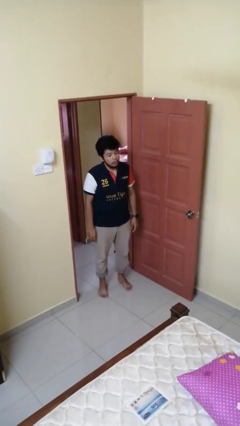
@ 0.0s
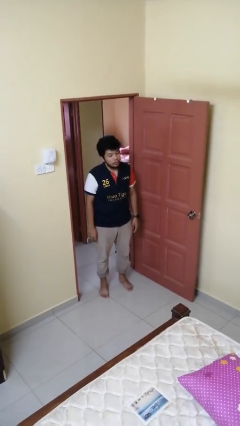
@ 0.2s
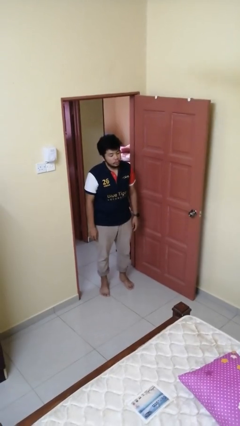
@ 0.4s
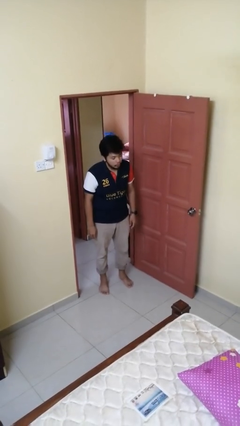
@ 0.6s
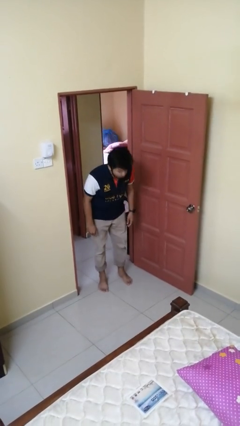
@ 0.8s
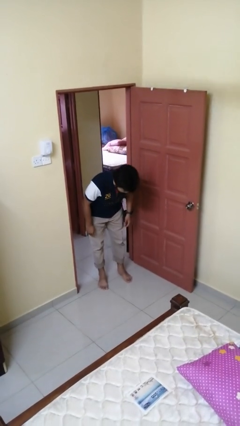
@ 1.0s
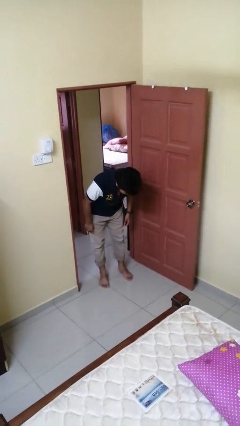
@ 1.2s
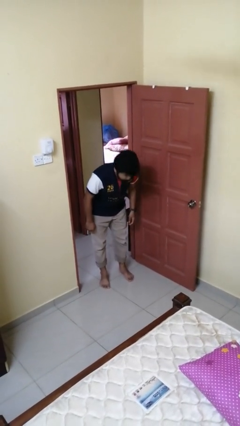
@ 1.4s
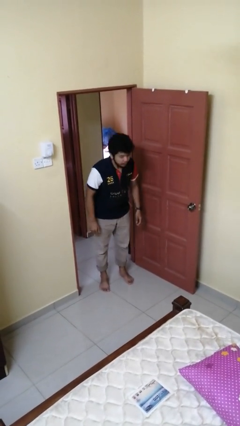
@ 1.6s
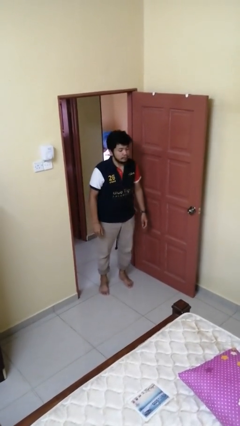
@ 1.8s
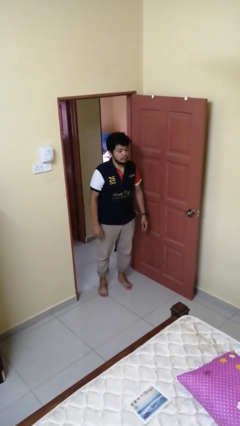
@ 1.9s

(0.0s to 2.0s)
person bows

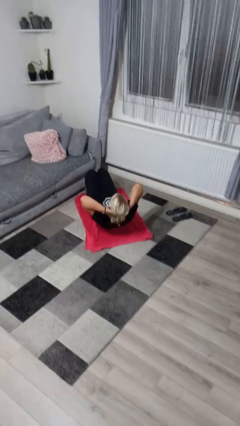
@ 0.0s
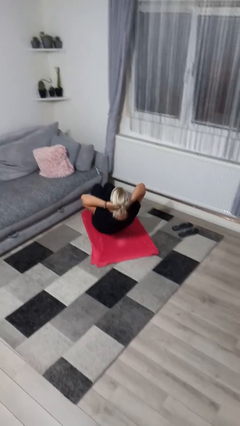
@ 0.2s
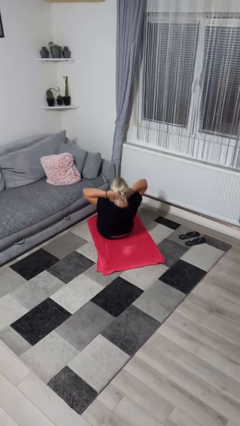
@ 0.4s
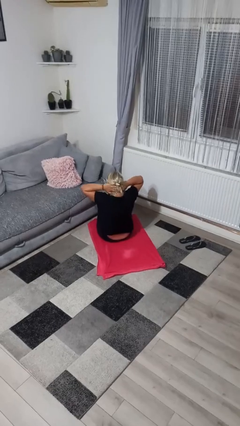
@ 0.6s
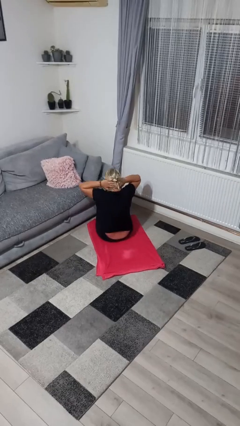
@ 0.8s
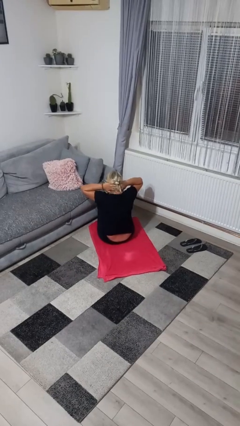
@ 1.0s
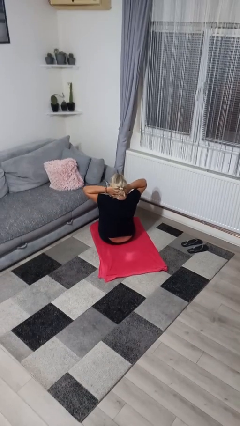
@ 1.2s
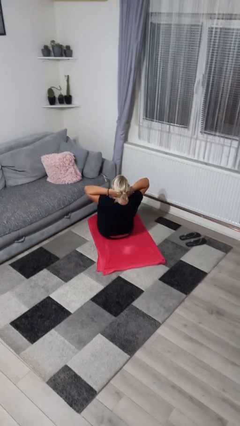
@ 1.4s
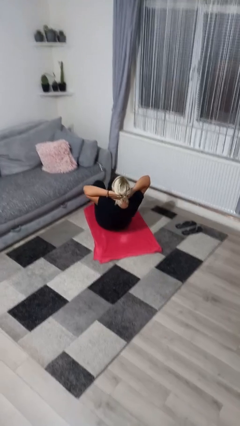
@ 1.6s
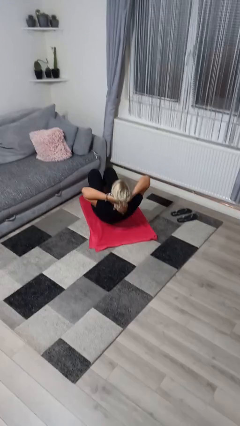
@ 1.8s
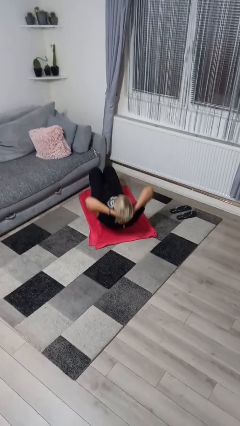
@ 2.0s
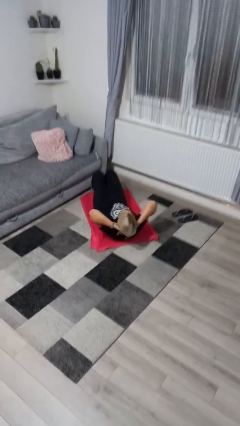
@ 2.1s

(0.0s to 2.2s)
person exercises with situp

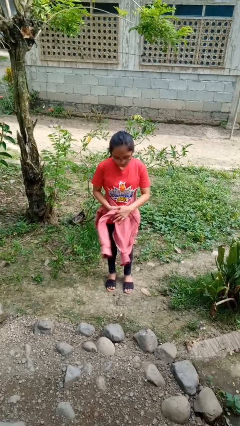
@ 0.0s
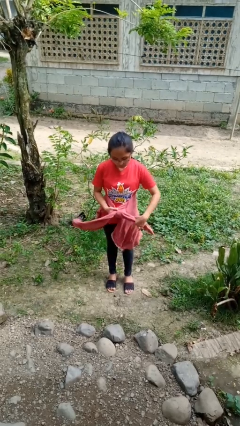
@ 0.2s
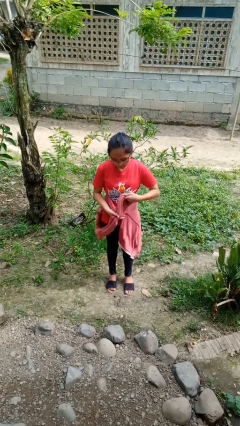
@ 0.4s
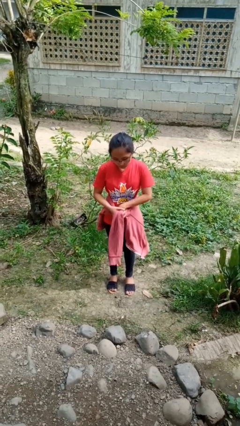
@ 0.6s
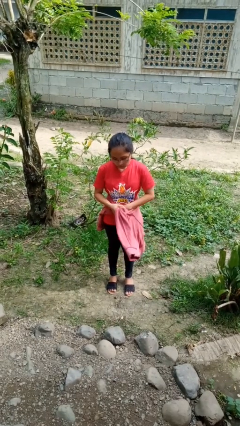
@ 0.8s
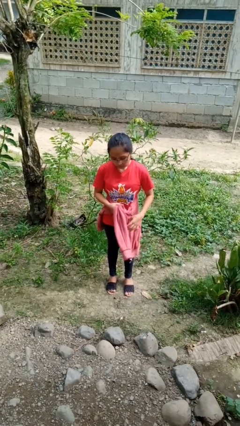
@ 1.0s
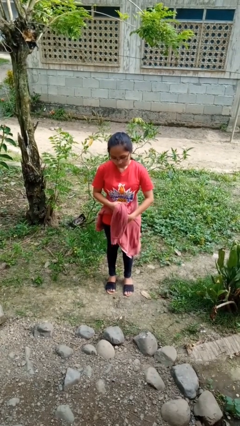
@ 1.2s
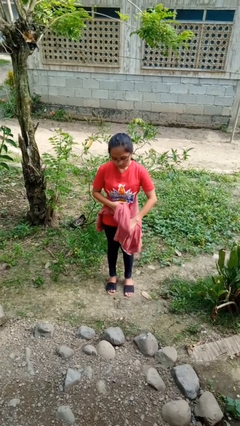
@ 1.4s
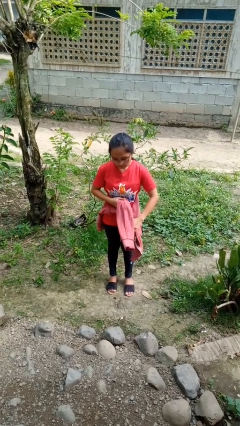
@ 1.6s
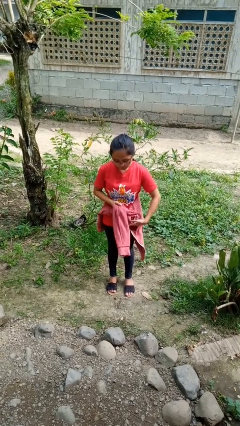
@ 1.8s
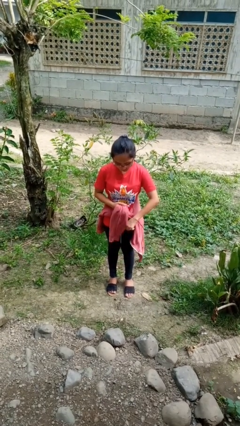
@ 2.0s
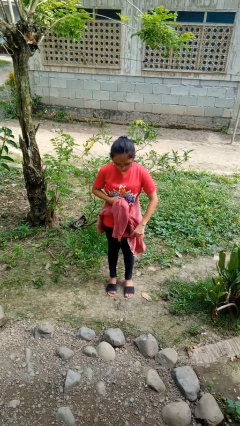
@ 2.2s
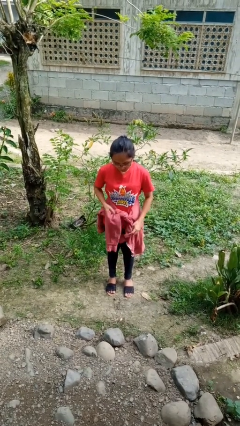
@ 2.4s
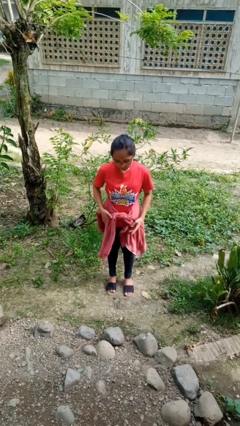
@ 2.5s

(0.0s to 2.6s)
person ties jacket around waist

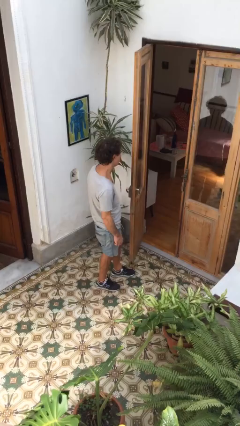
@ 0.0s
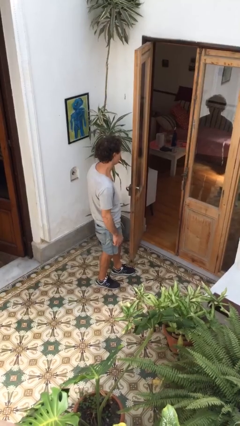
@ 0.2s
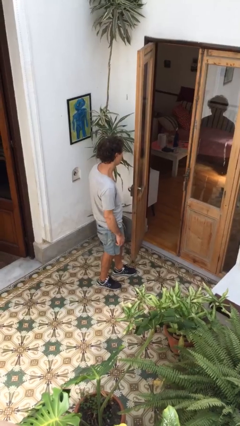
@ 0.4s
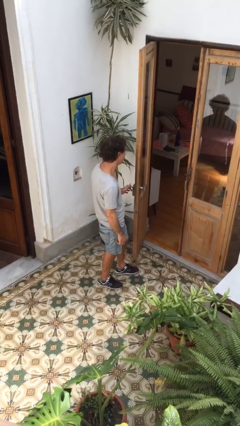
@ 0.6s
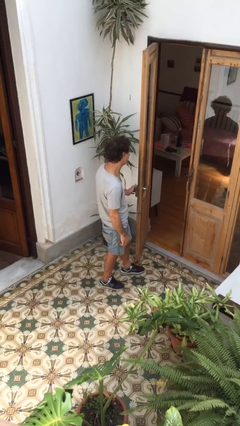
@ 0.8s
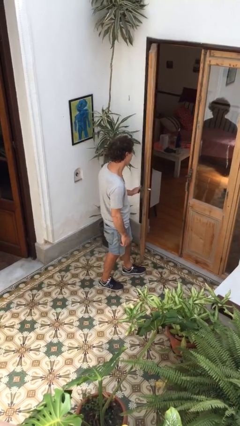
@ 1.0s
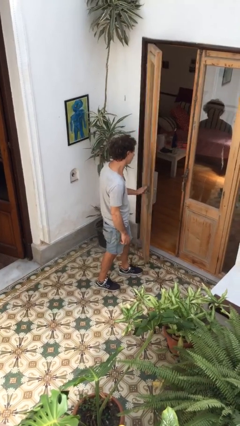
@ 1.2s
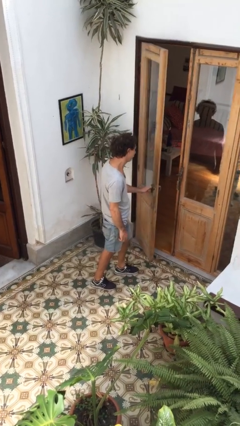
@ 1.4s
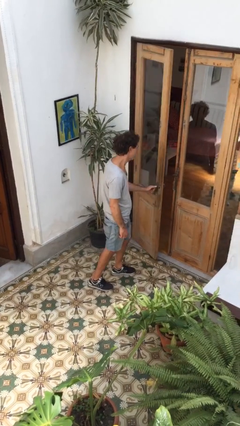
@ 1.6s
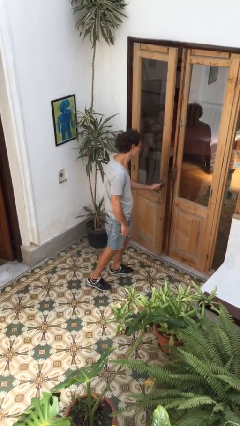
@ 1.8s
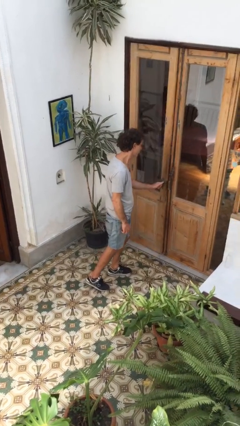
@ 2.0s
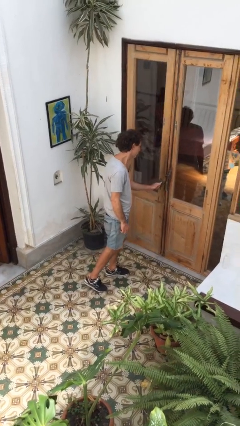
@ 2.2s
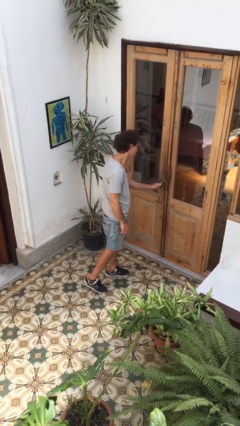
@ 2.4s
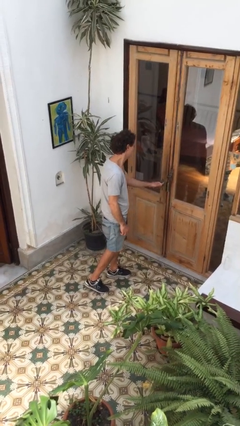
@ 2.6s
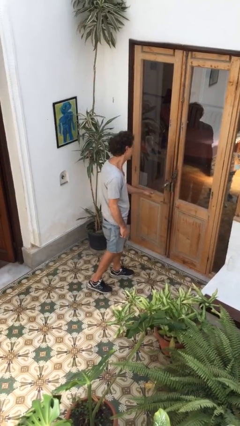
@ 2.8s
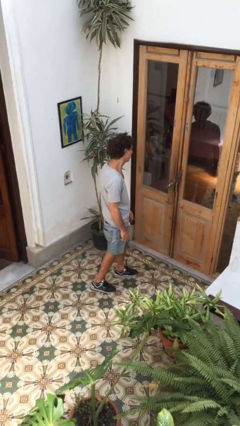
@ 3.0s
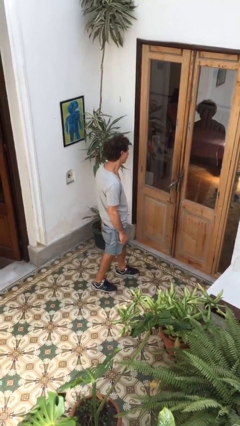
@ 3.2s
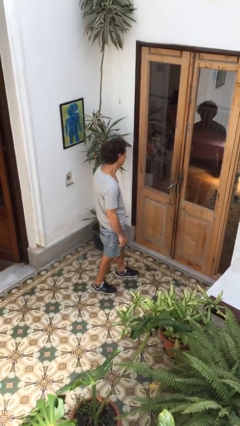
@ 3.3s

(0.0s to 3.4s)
person closes facility door

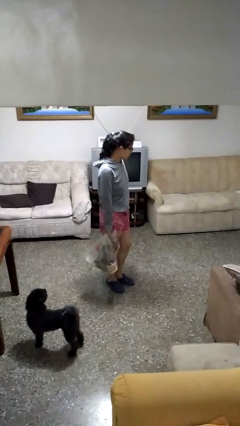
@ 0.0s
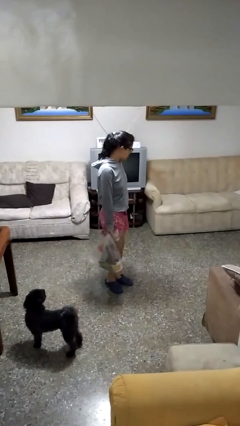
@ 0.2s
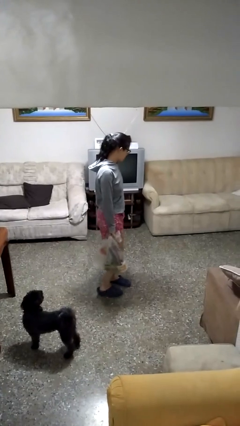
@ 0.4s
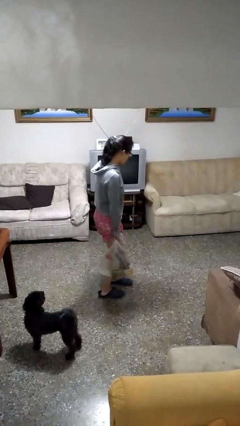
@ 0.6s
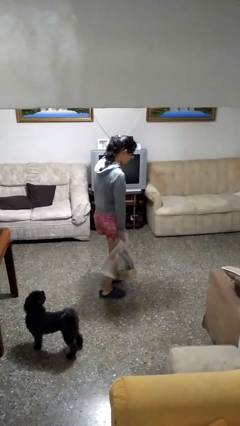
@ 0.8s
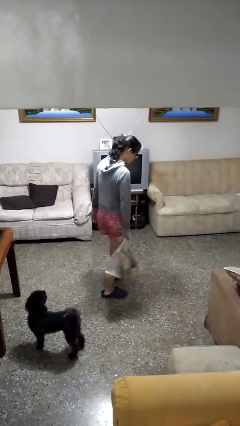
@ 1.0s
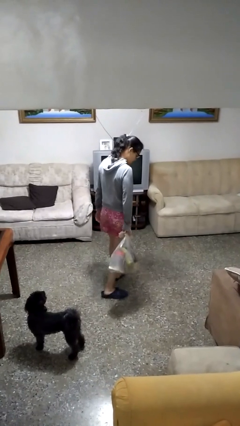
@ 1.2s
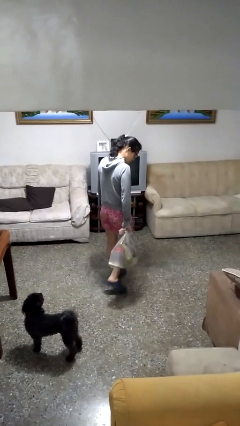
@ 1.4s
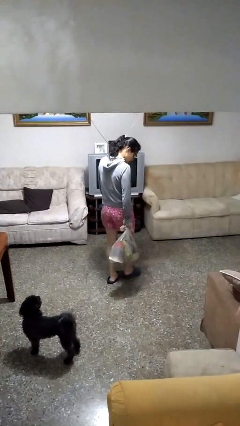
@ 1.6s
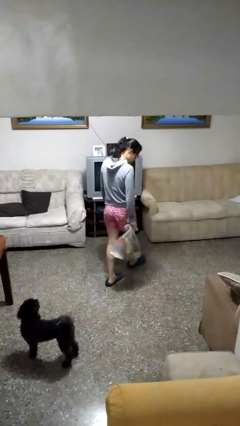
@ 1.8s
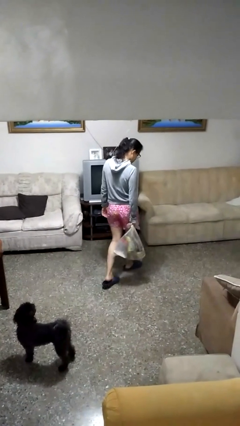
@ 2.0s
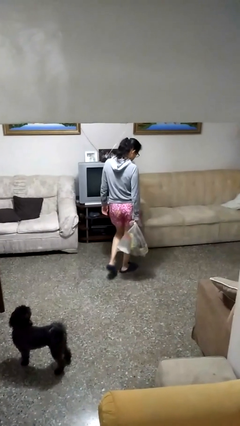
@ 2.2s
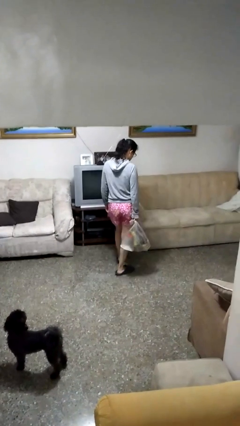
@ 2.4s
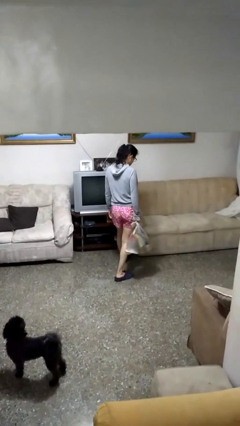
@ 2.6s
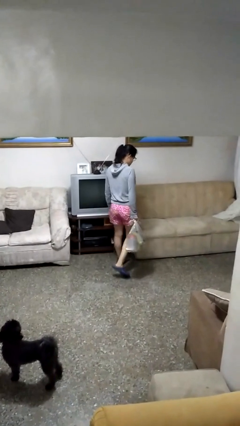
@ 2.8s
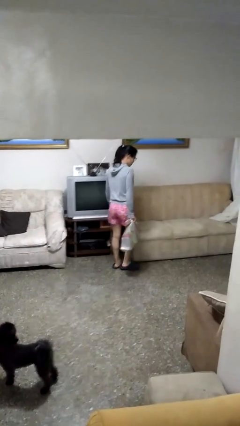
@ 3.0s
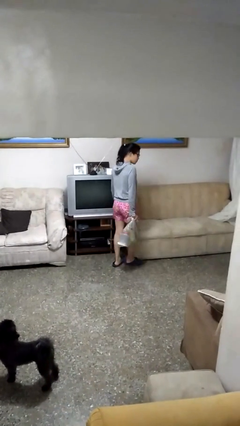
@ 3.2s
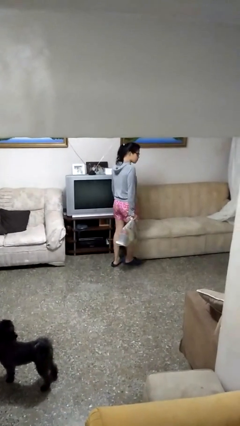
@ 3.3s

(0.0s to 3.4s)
person carries groceries

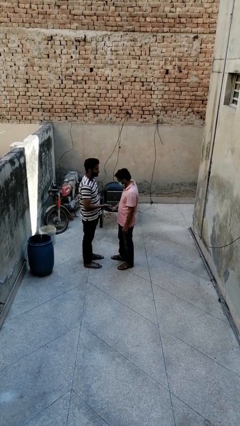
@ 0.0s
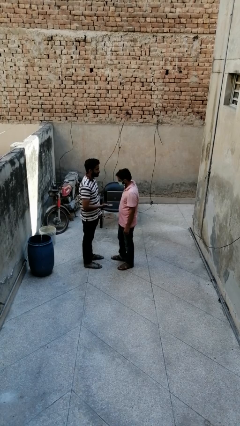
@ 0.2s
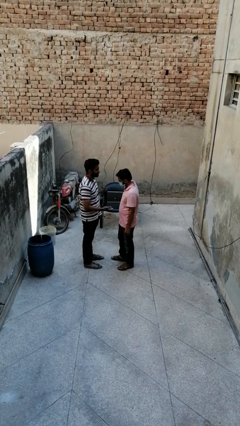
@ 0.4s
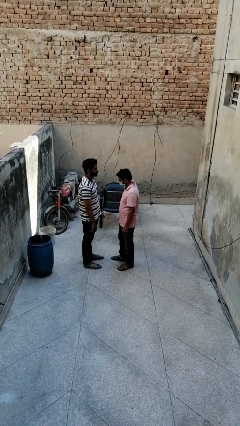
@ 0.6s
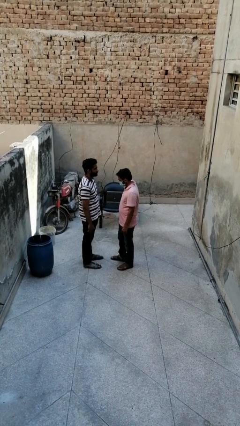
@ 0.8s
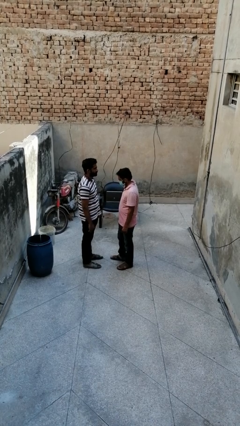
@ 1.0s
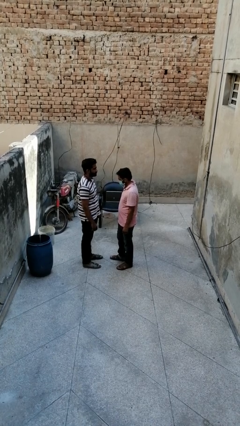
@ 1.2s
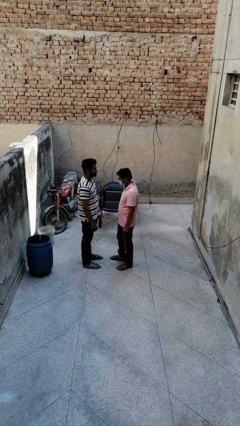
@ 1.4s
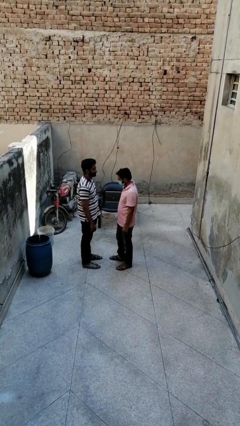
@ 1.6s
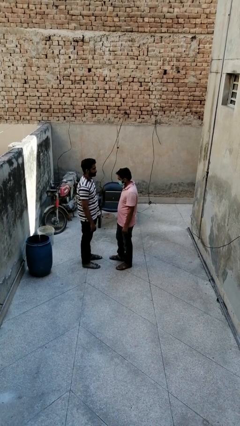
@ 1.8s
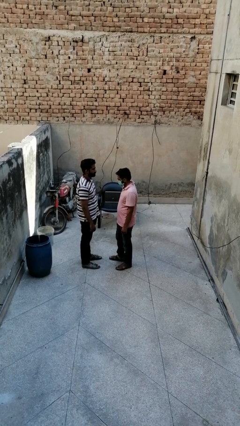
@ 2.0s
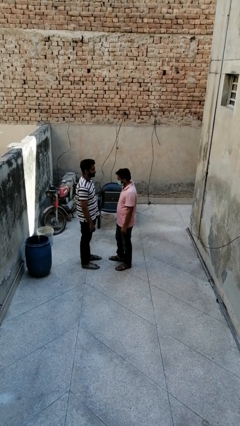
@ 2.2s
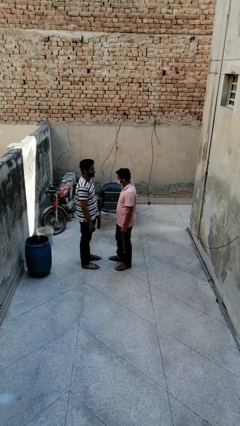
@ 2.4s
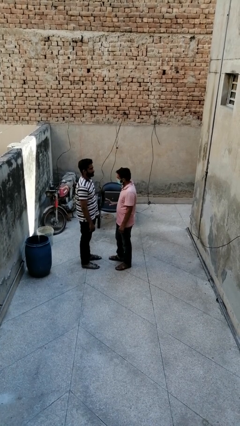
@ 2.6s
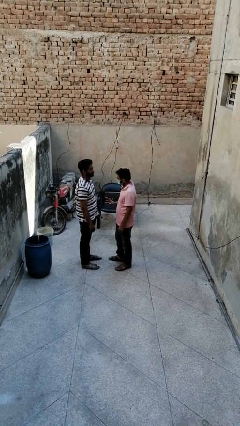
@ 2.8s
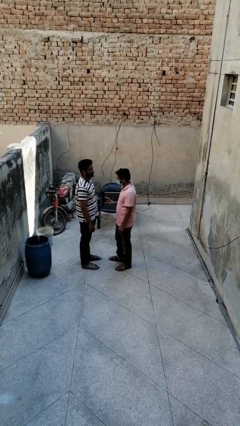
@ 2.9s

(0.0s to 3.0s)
person highfives hand

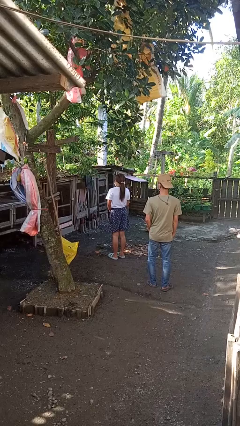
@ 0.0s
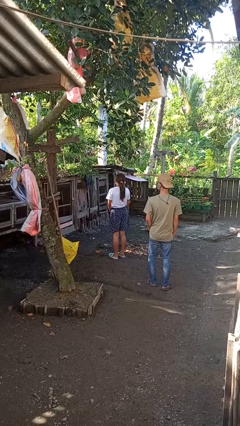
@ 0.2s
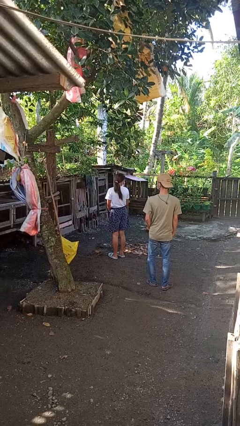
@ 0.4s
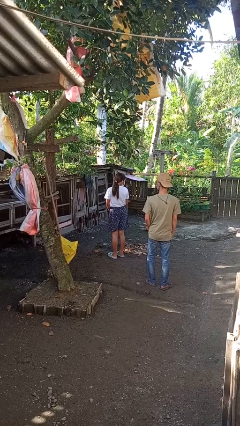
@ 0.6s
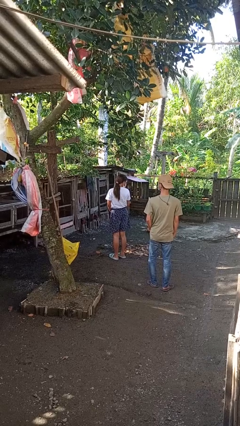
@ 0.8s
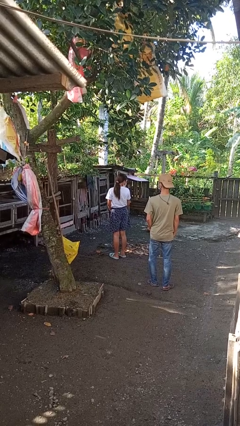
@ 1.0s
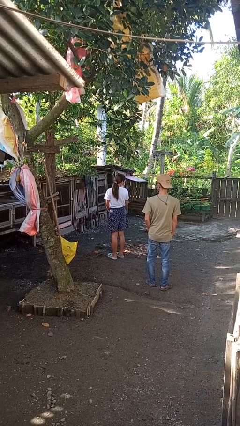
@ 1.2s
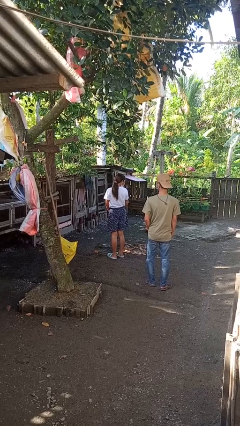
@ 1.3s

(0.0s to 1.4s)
person looks over shoulder
